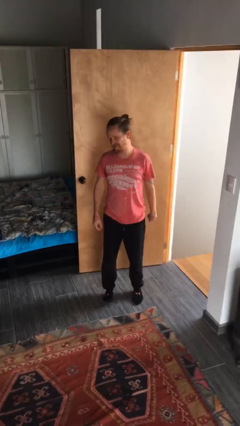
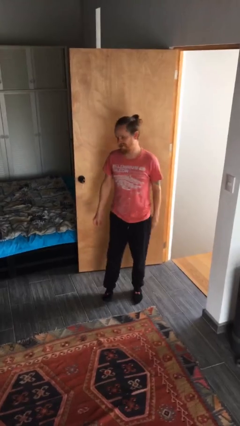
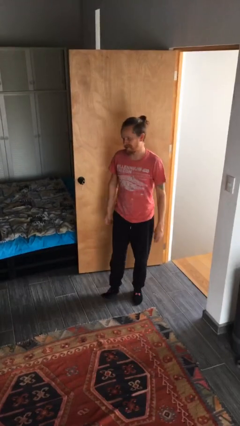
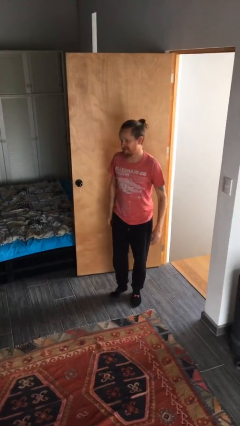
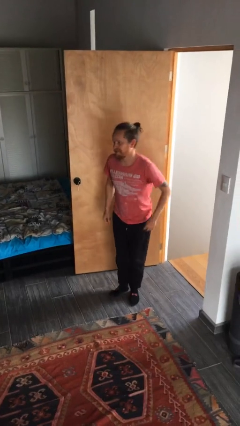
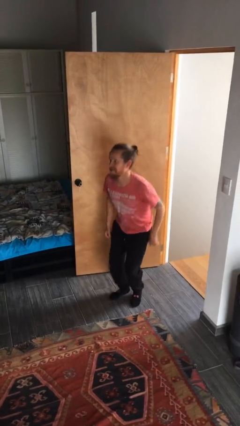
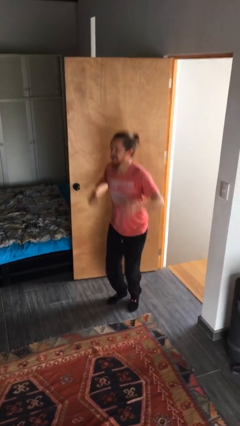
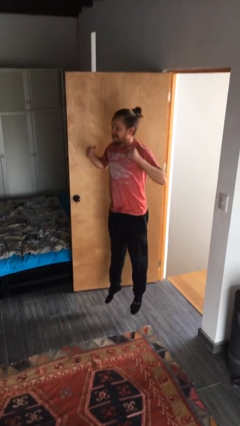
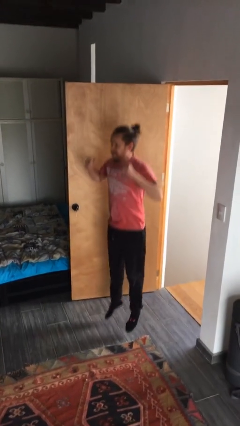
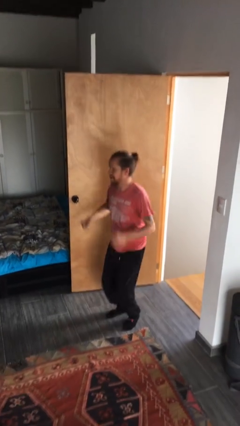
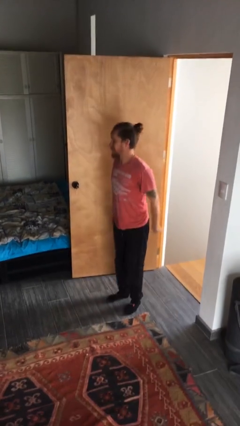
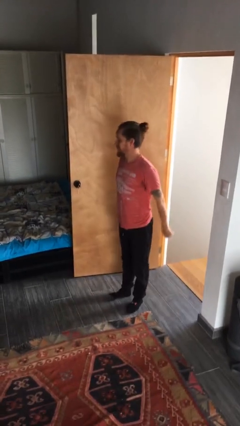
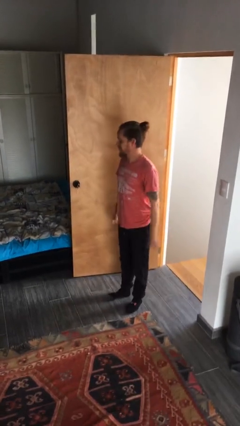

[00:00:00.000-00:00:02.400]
person jumps

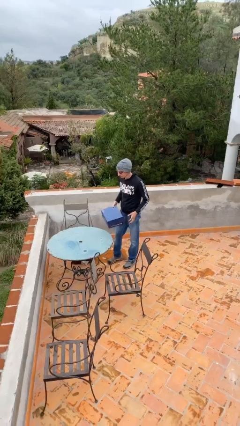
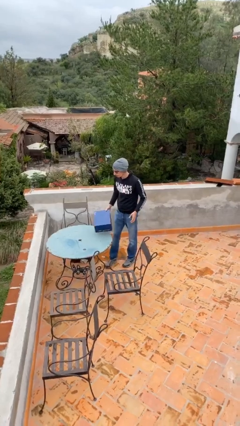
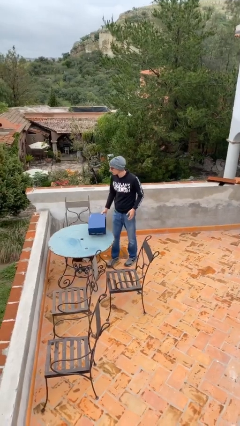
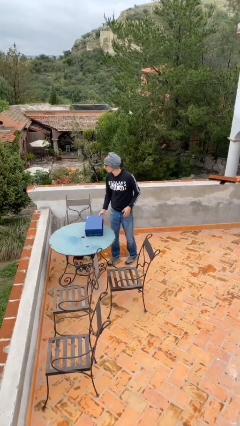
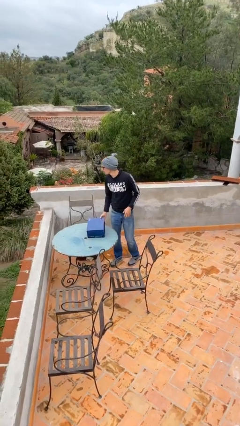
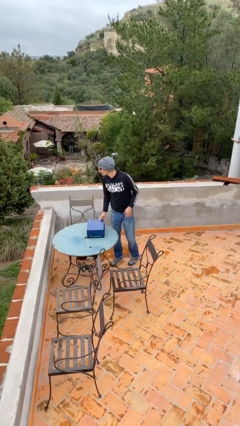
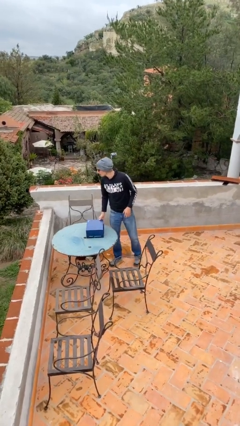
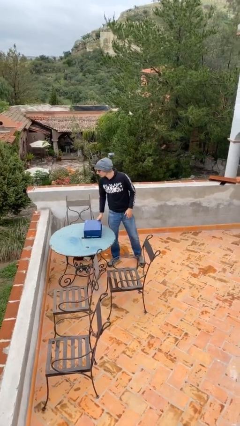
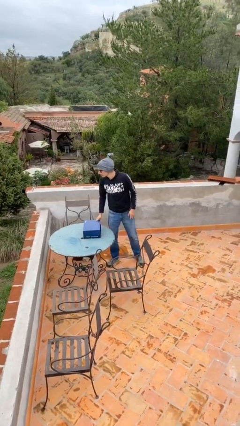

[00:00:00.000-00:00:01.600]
person puts down object on table

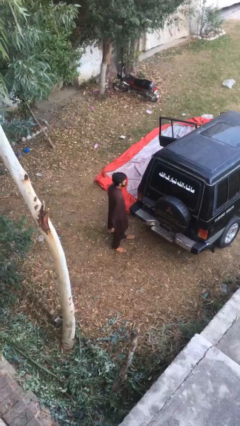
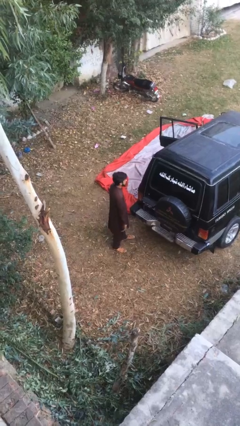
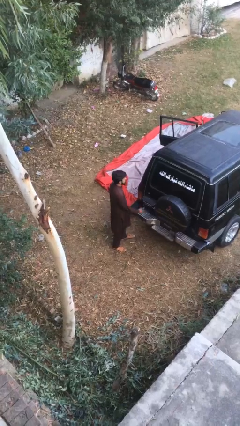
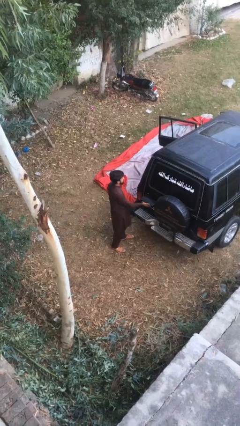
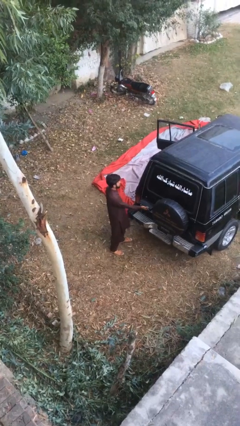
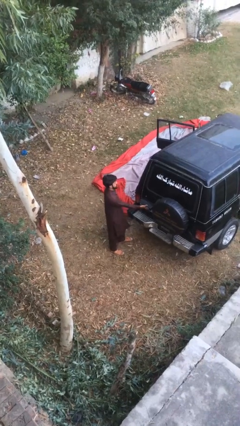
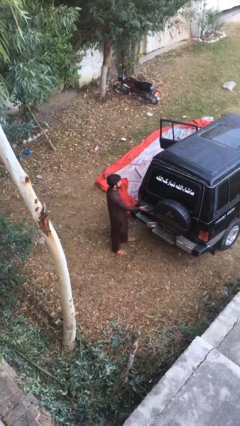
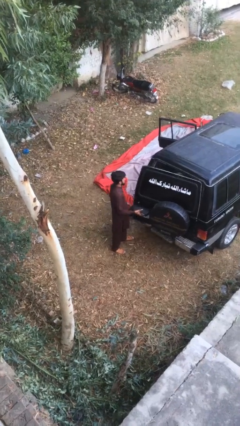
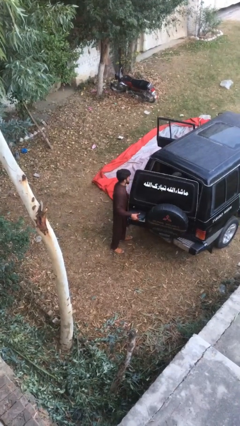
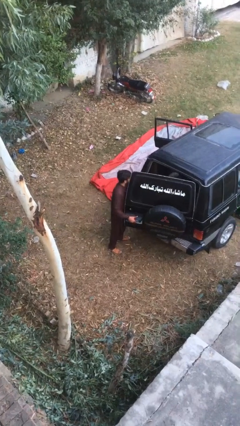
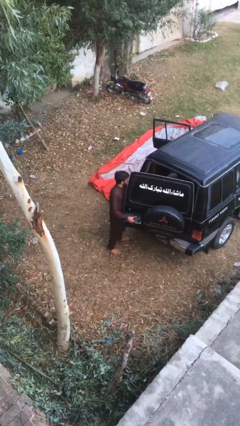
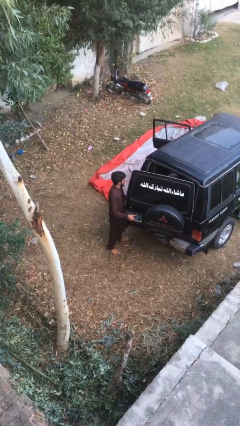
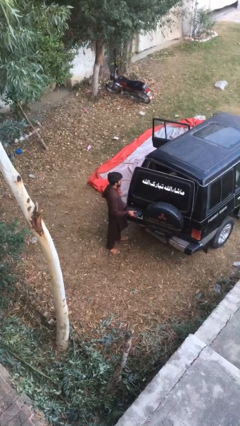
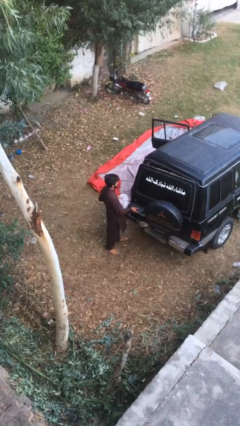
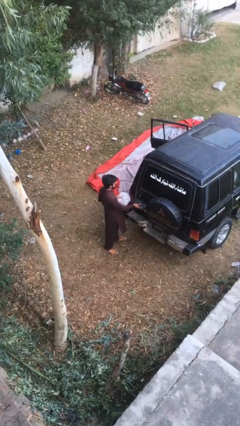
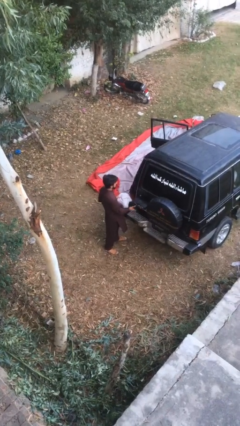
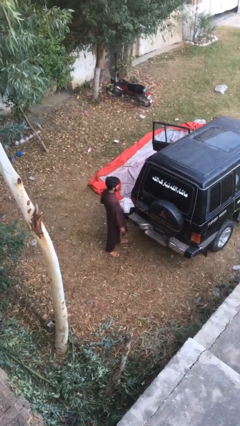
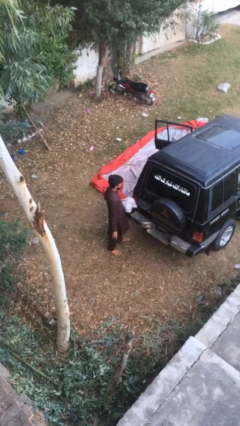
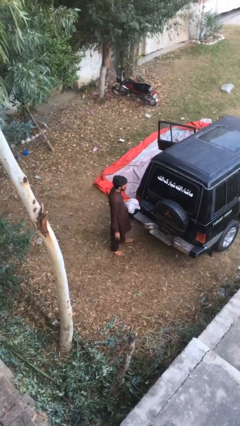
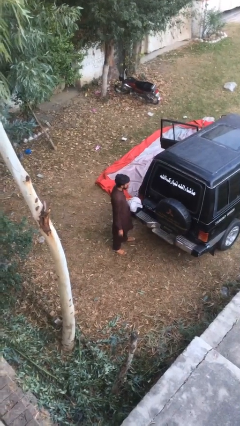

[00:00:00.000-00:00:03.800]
person unloads car

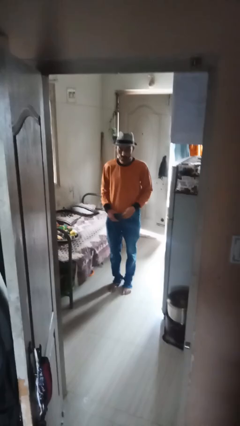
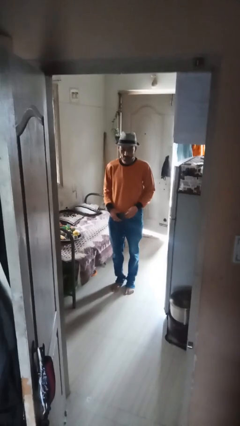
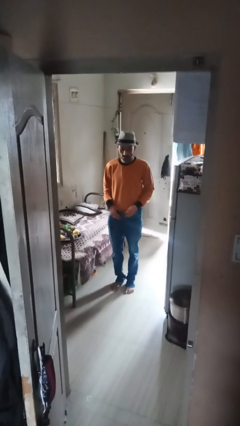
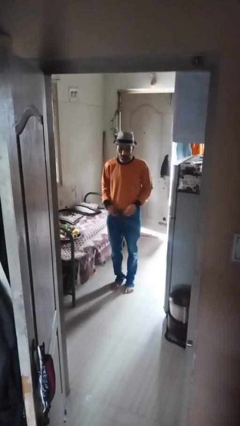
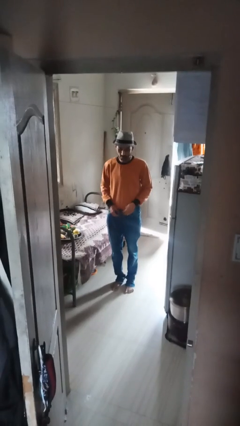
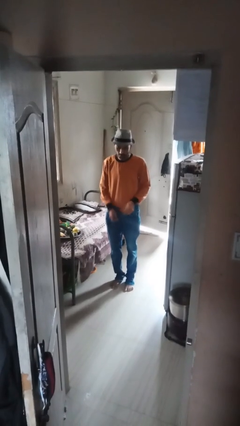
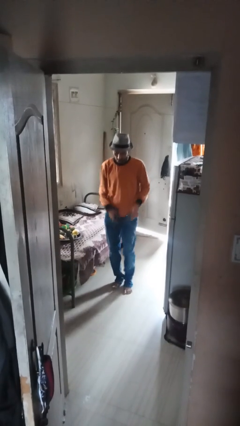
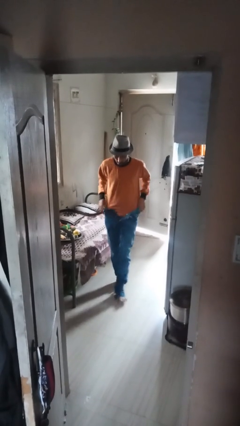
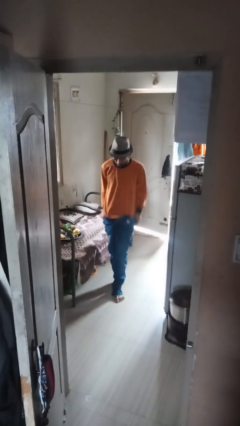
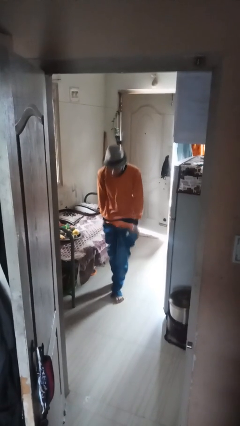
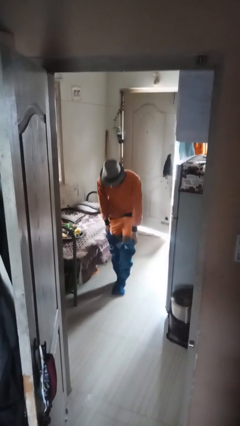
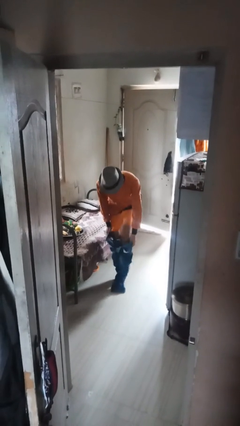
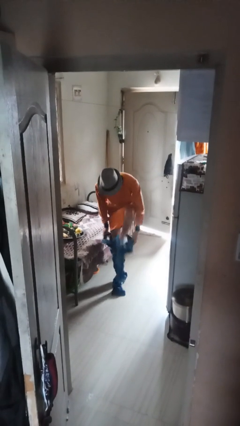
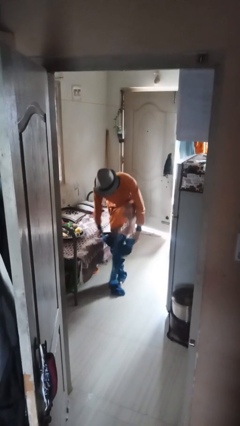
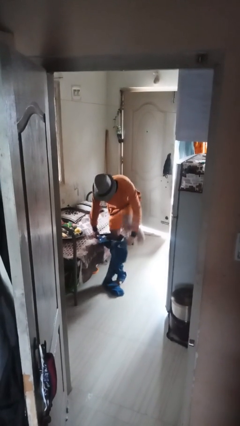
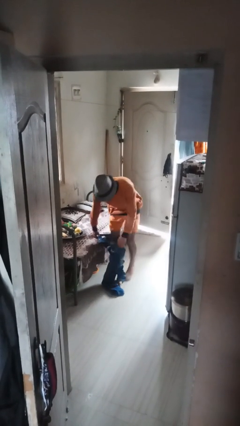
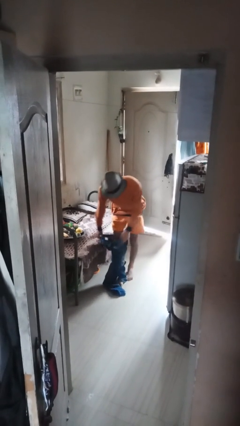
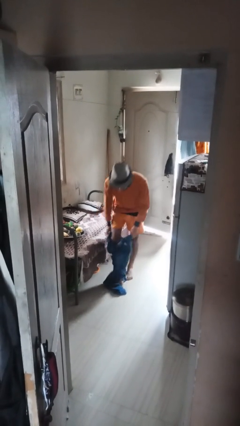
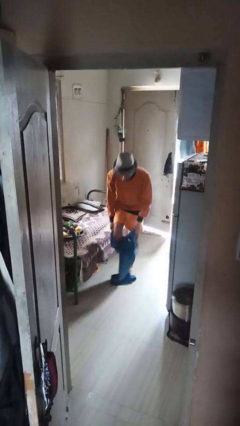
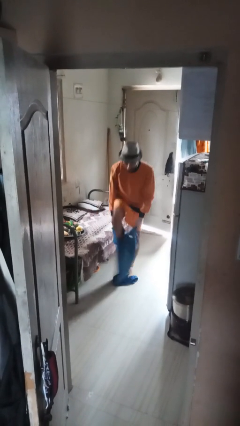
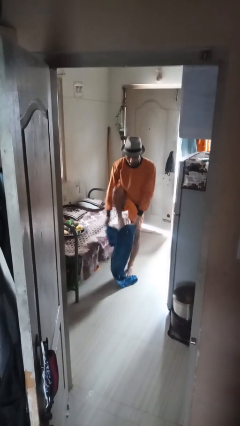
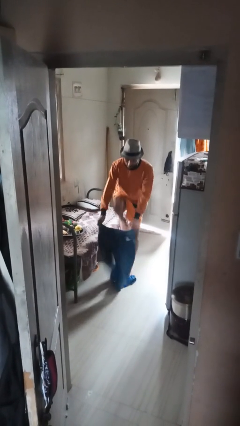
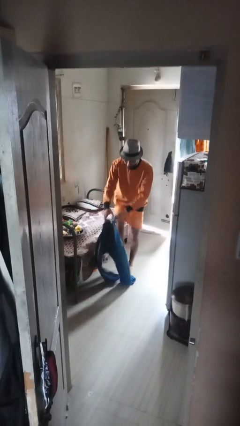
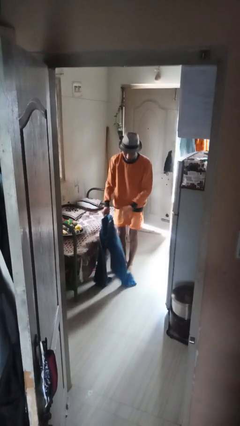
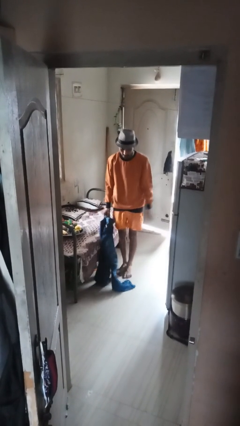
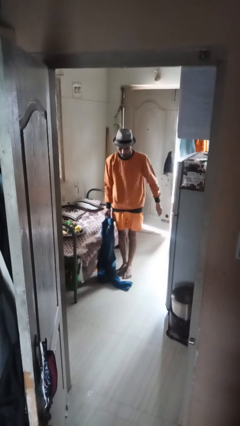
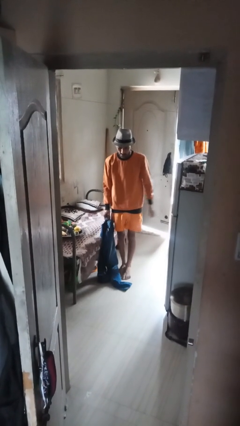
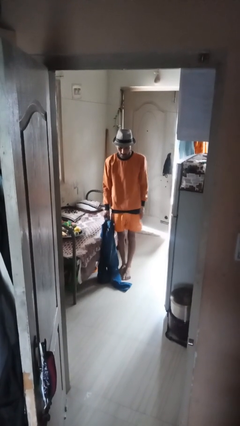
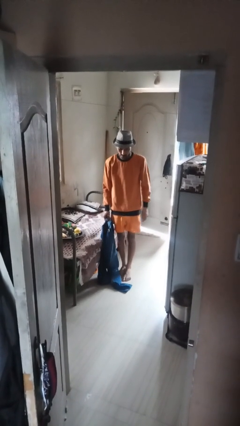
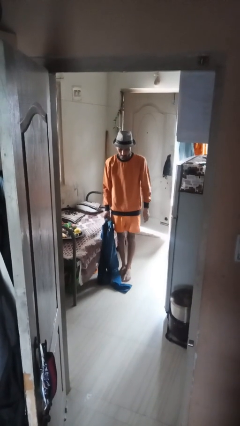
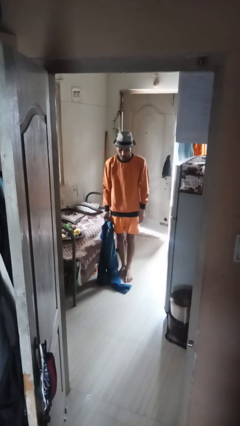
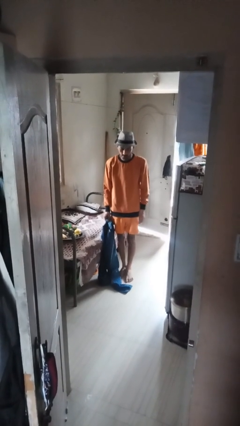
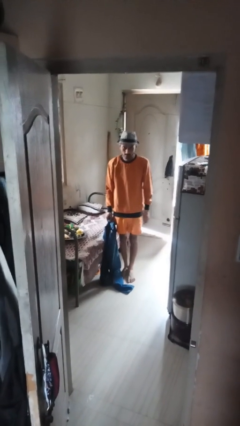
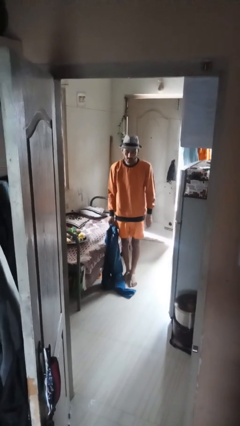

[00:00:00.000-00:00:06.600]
person takes off pants

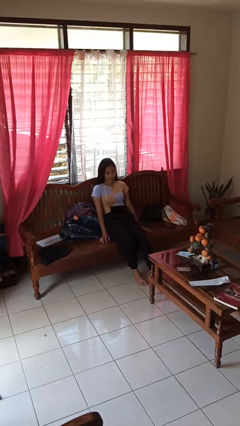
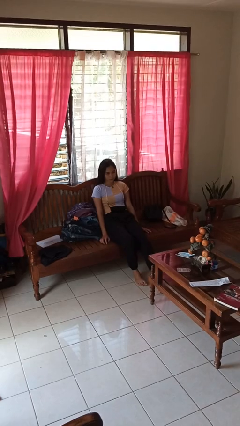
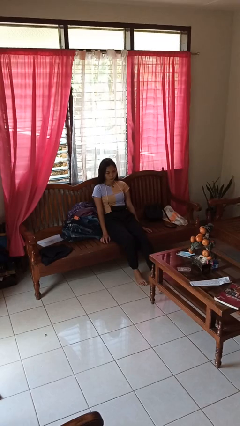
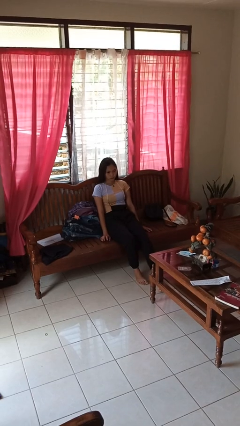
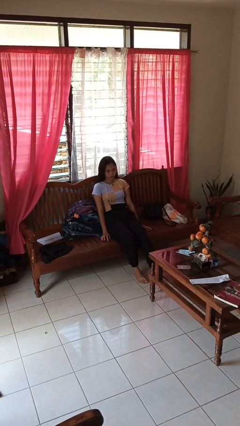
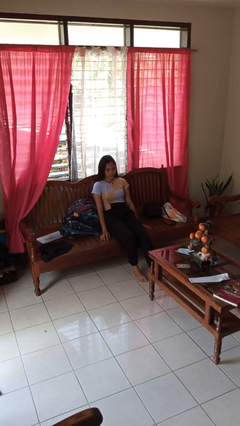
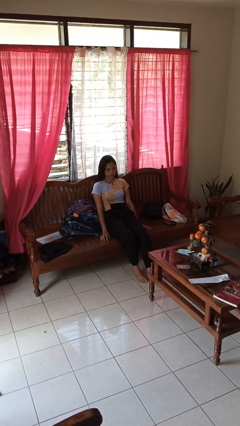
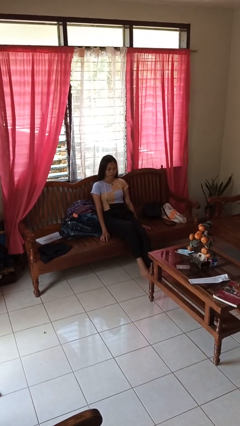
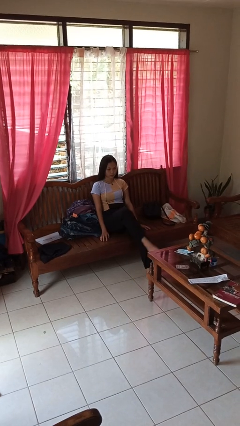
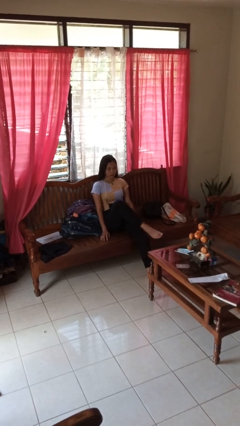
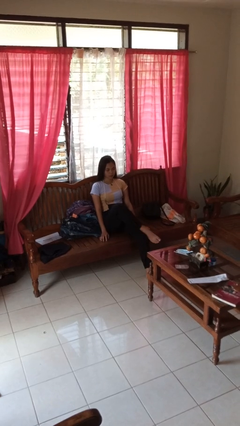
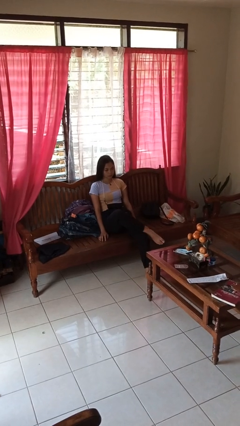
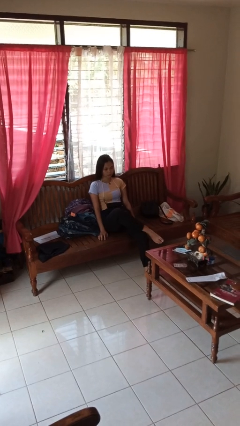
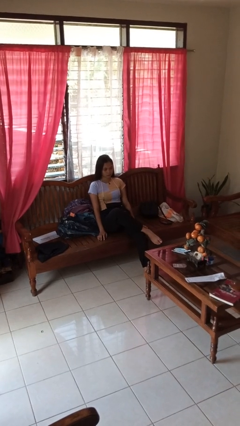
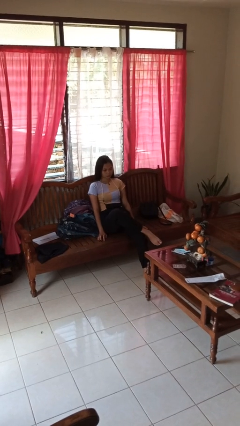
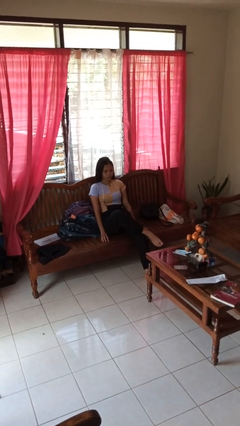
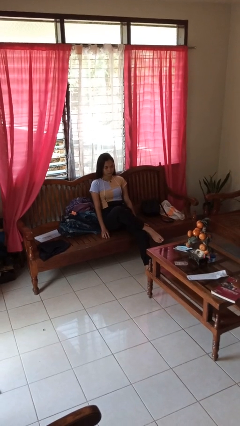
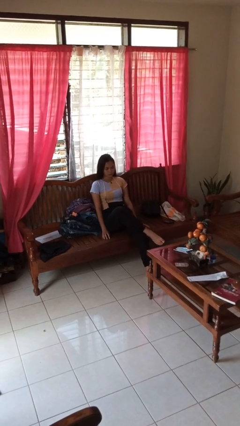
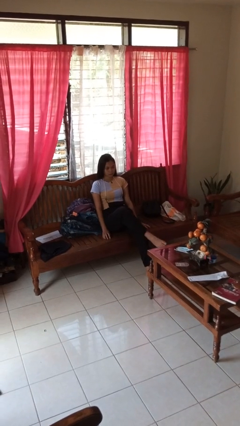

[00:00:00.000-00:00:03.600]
person crosses legs
